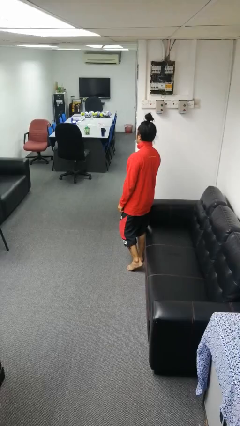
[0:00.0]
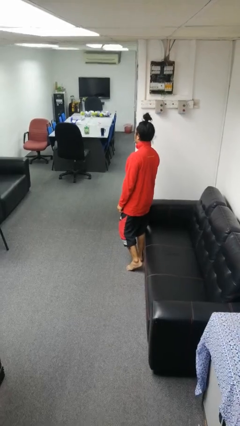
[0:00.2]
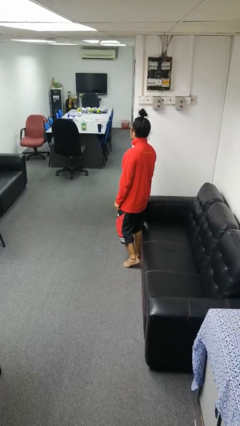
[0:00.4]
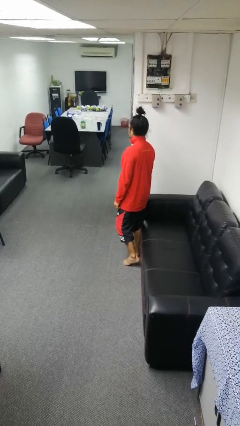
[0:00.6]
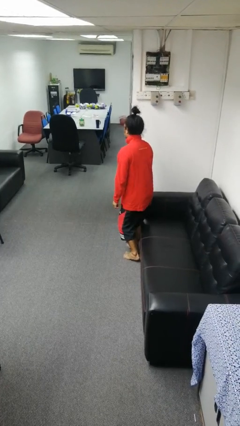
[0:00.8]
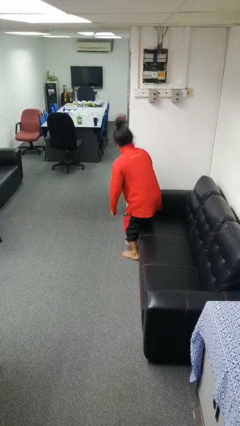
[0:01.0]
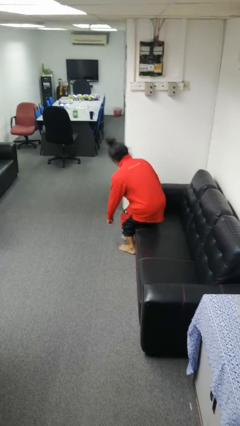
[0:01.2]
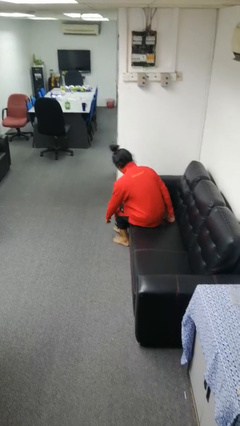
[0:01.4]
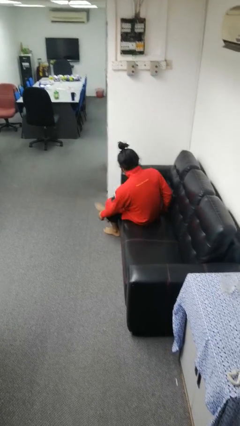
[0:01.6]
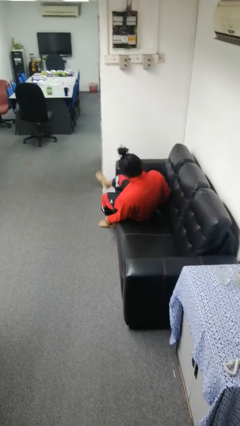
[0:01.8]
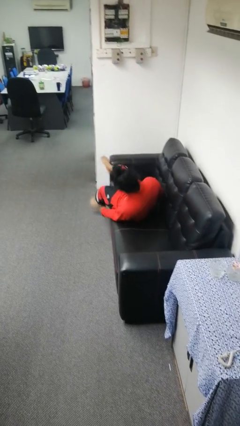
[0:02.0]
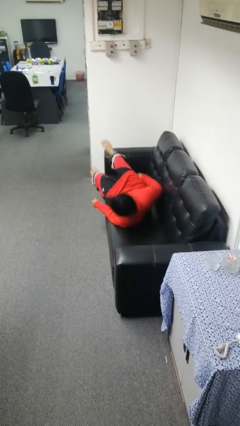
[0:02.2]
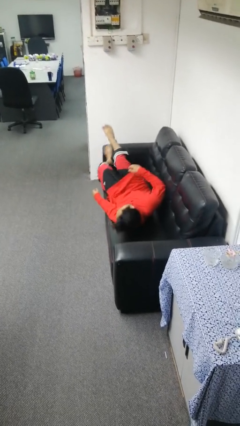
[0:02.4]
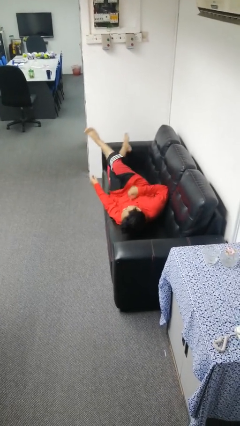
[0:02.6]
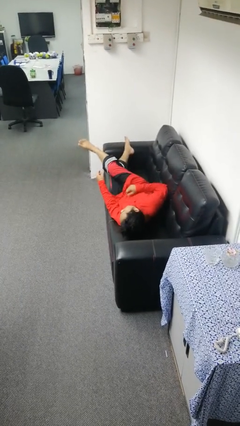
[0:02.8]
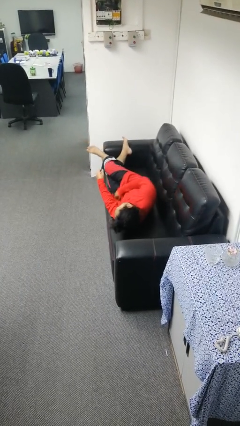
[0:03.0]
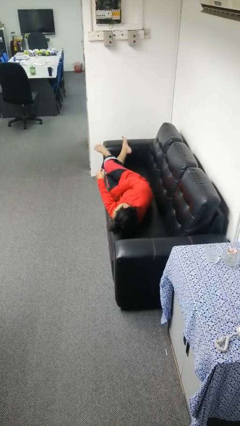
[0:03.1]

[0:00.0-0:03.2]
person lies down on couch

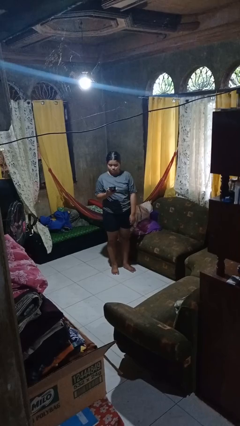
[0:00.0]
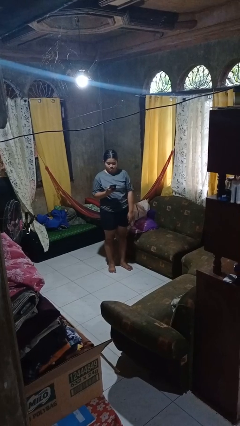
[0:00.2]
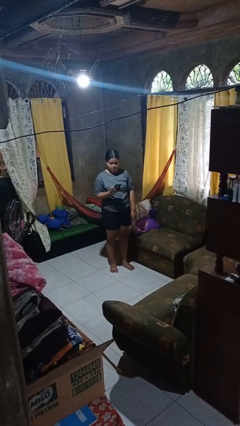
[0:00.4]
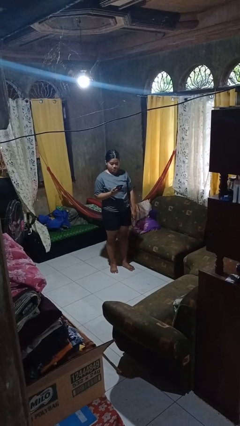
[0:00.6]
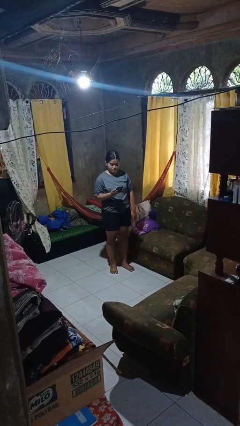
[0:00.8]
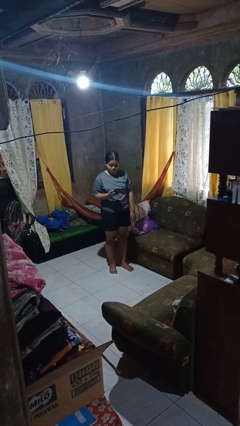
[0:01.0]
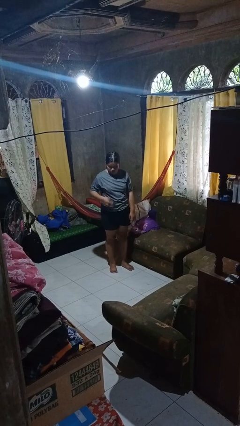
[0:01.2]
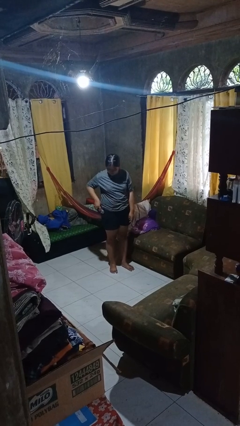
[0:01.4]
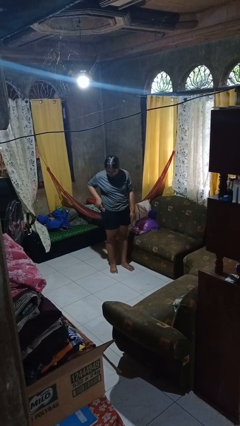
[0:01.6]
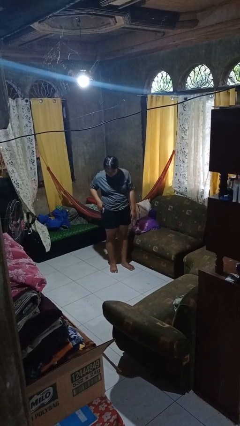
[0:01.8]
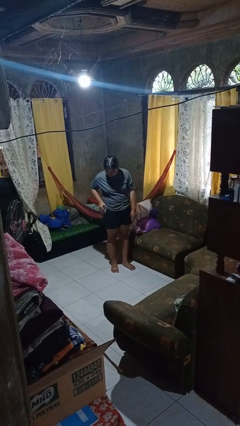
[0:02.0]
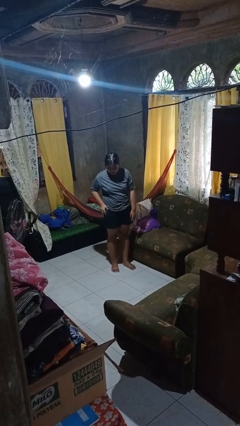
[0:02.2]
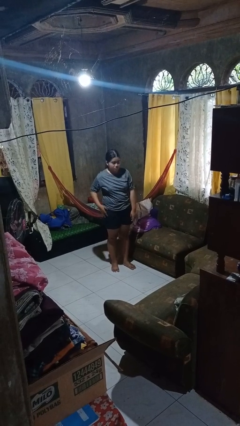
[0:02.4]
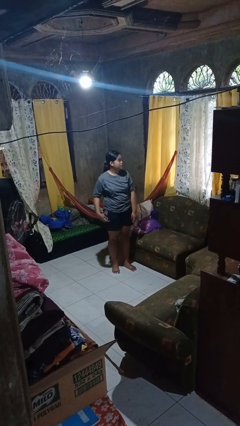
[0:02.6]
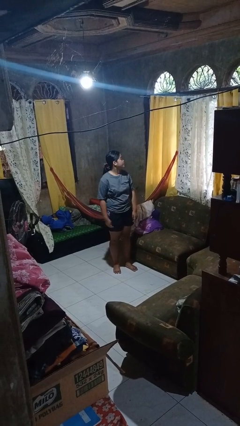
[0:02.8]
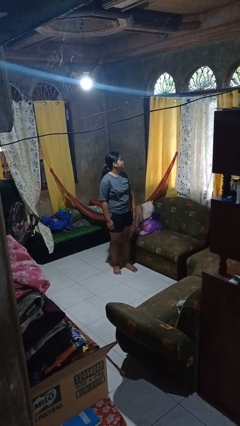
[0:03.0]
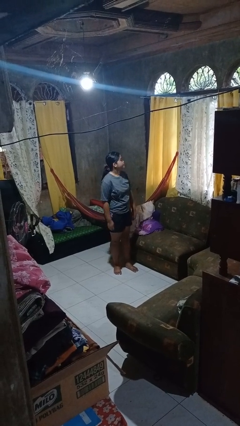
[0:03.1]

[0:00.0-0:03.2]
person puts phone into pocket

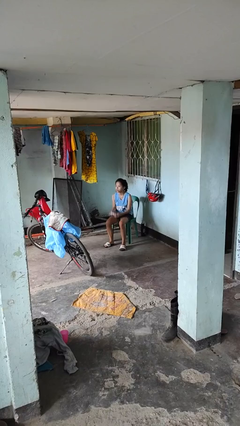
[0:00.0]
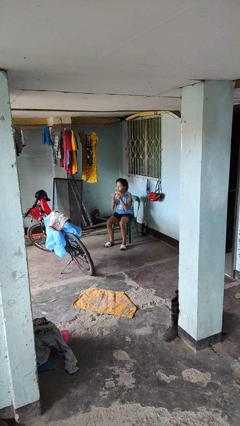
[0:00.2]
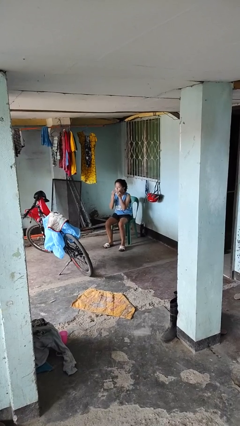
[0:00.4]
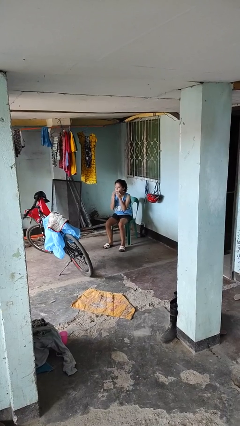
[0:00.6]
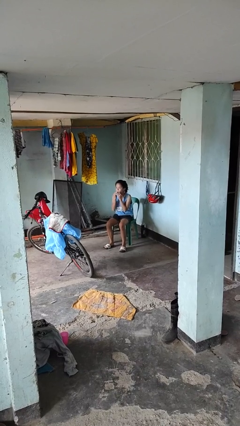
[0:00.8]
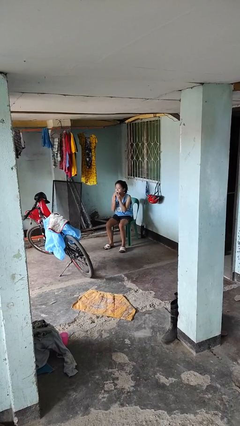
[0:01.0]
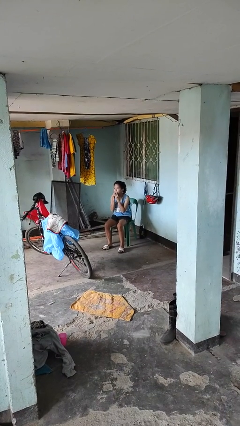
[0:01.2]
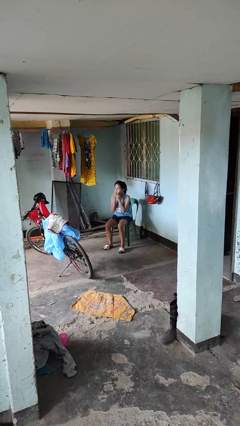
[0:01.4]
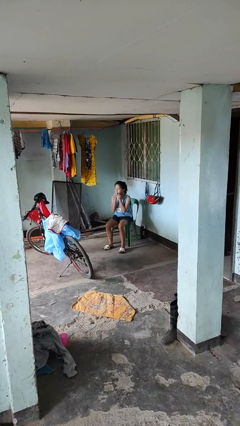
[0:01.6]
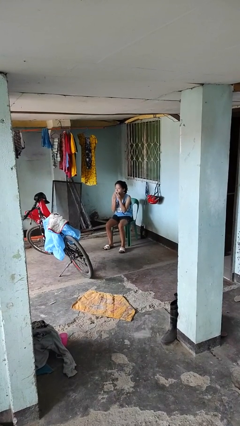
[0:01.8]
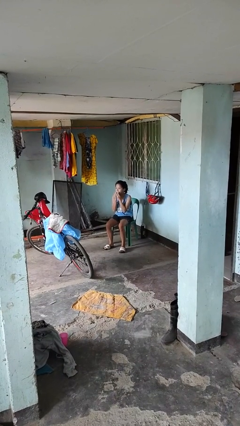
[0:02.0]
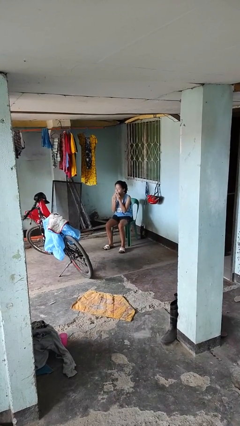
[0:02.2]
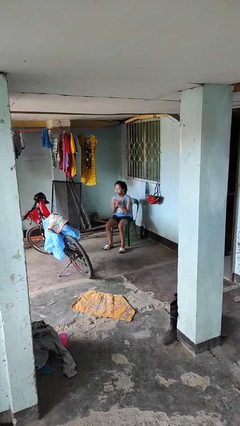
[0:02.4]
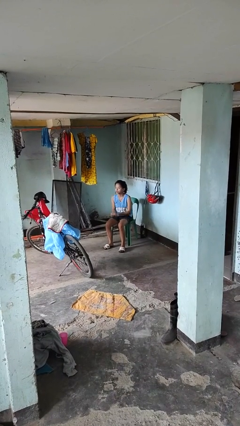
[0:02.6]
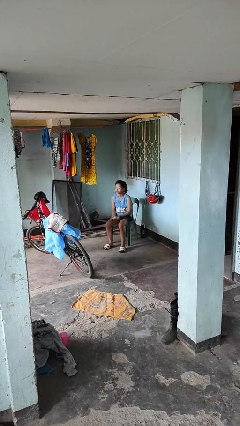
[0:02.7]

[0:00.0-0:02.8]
person wipes mouth with napkin

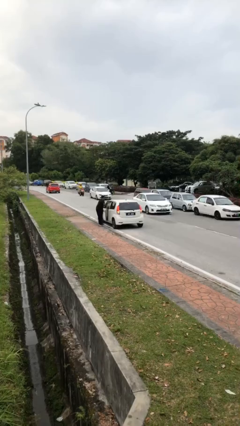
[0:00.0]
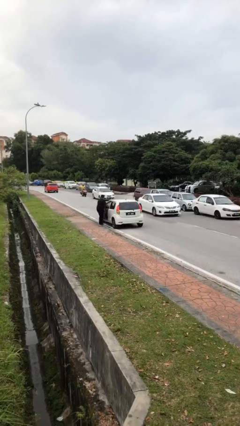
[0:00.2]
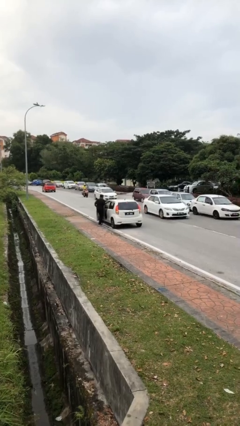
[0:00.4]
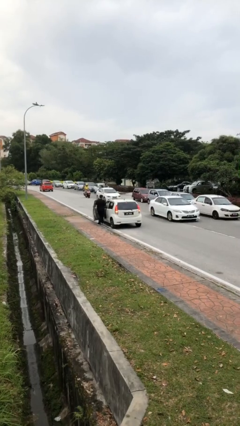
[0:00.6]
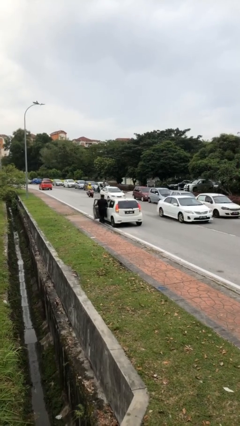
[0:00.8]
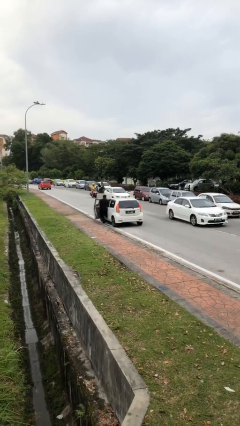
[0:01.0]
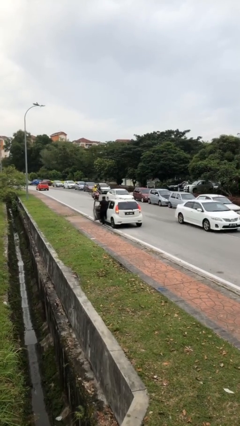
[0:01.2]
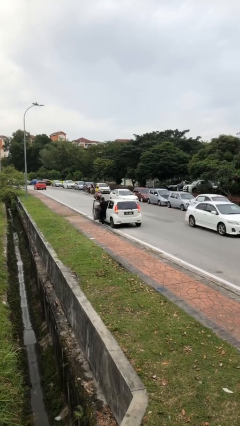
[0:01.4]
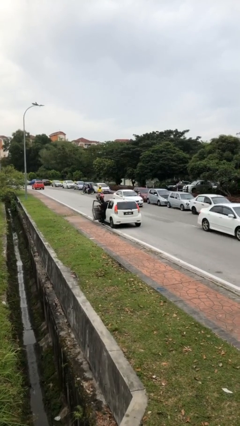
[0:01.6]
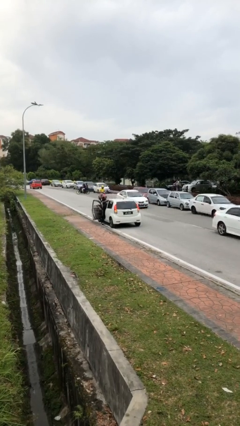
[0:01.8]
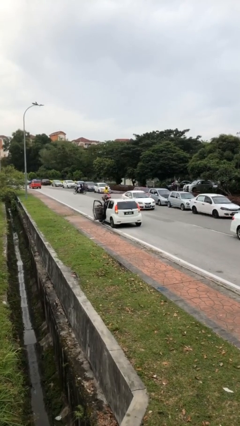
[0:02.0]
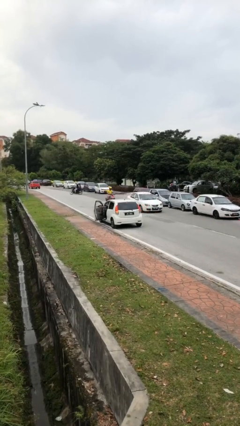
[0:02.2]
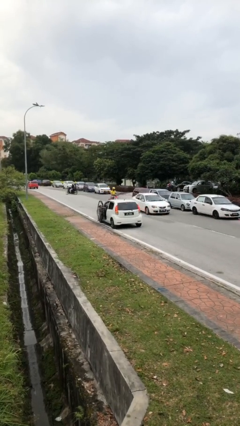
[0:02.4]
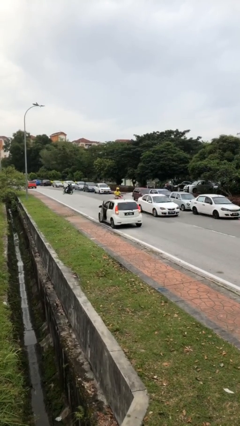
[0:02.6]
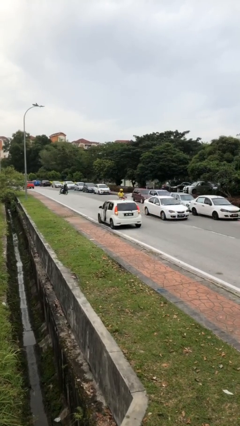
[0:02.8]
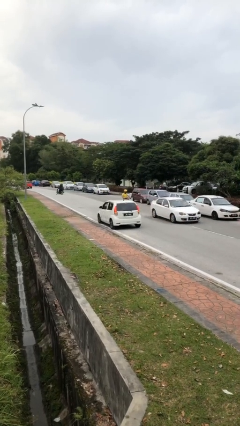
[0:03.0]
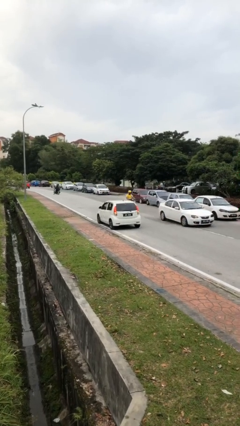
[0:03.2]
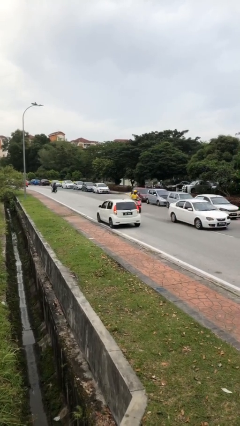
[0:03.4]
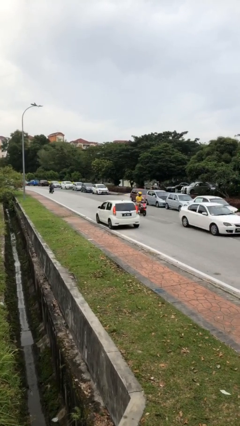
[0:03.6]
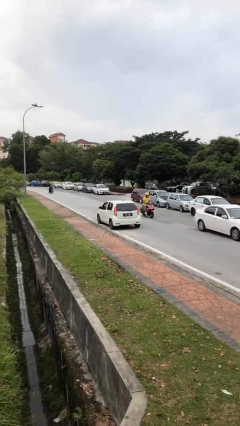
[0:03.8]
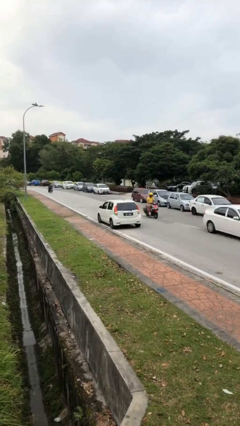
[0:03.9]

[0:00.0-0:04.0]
car picks up person

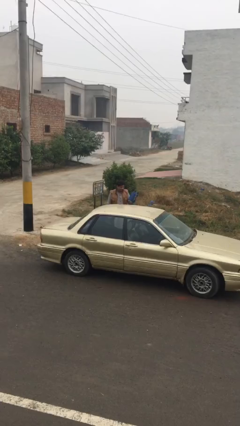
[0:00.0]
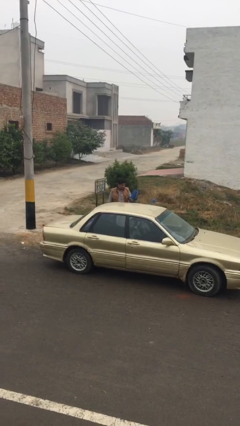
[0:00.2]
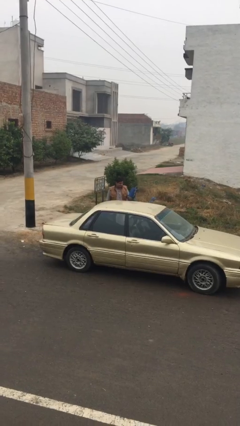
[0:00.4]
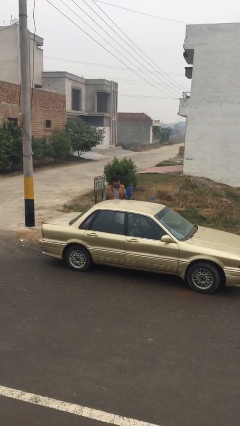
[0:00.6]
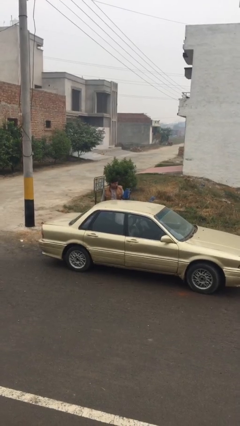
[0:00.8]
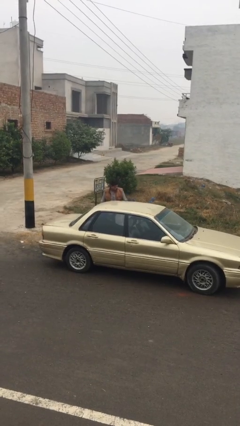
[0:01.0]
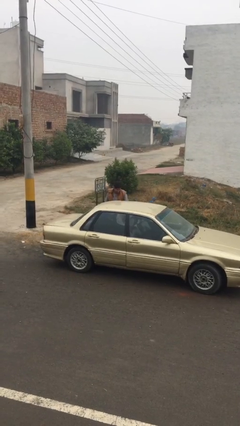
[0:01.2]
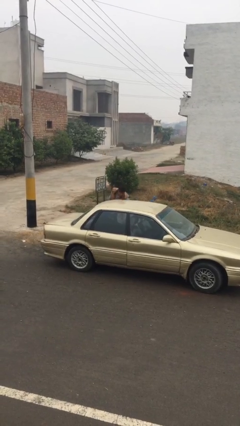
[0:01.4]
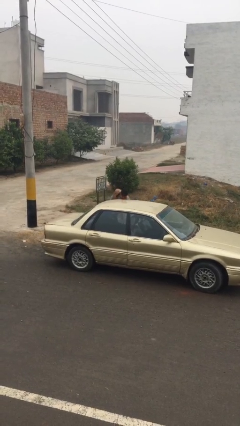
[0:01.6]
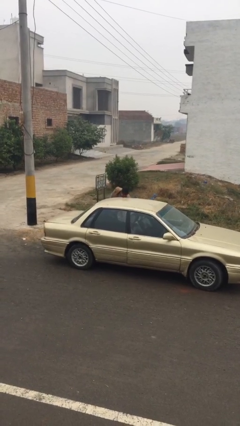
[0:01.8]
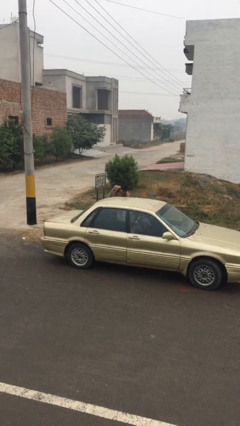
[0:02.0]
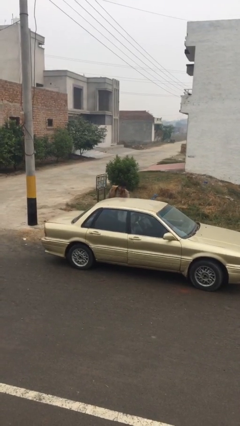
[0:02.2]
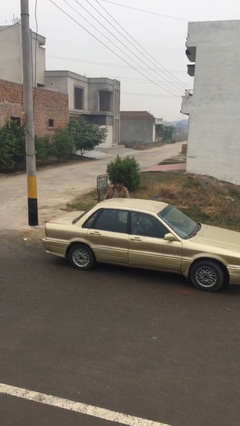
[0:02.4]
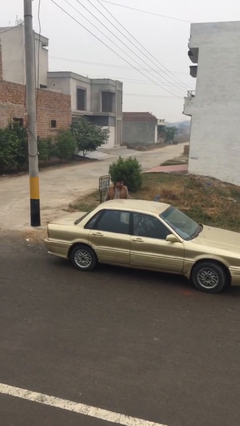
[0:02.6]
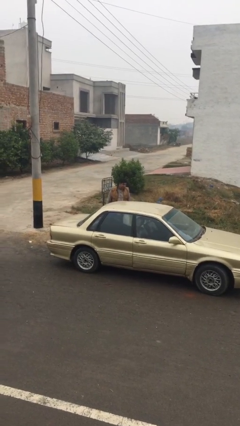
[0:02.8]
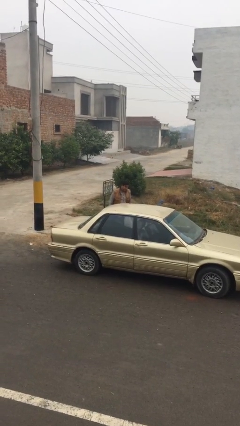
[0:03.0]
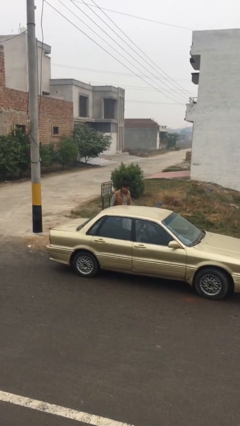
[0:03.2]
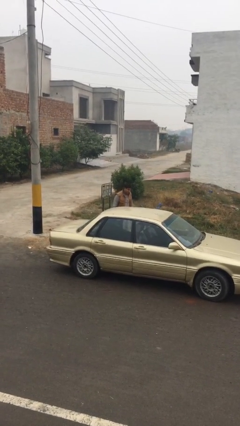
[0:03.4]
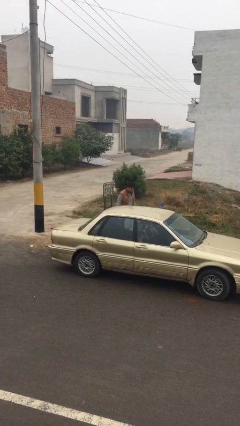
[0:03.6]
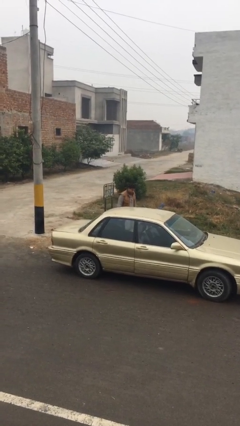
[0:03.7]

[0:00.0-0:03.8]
person loads car

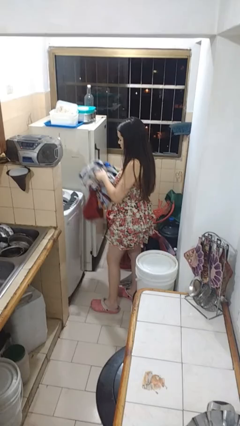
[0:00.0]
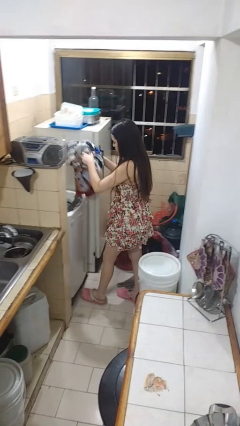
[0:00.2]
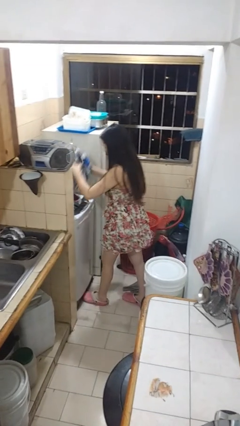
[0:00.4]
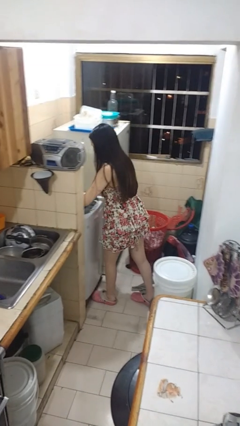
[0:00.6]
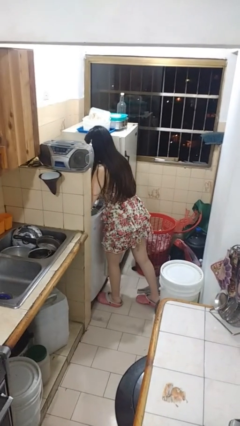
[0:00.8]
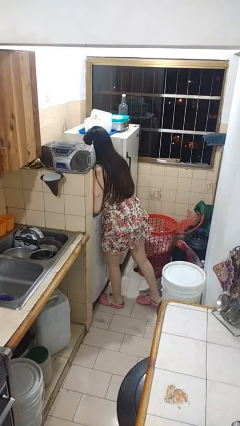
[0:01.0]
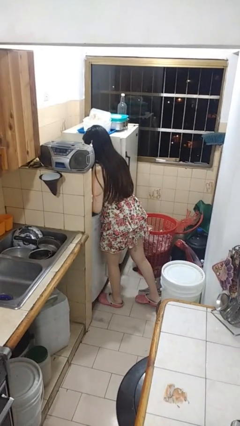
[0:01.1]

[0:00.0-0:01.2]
person loads clotheswasher
